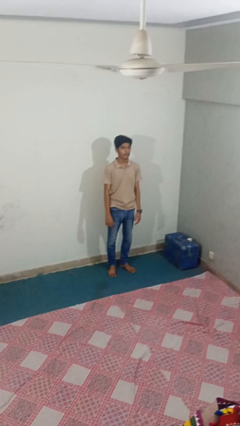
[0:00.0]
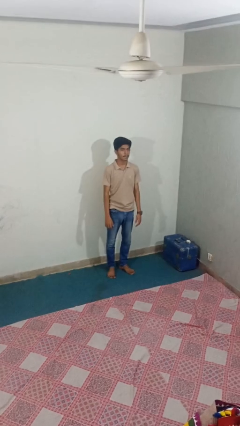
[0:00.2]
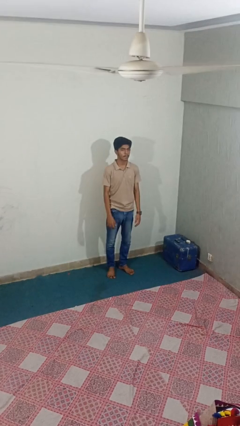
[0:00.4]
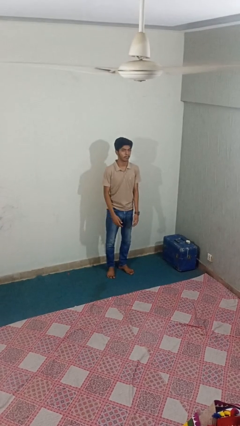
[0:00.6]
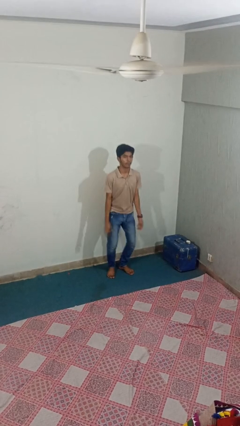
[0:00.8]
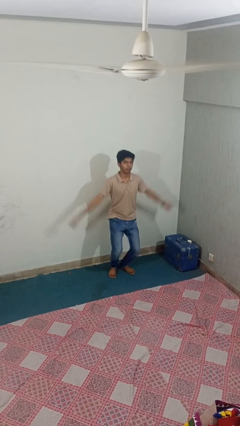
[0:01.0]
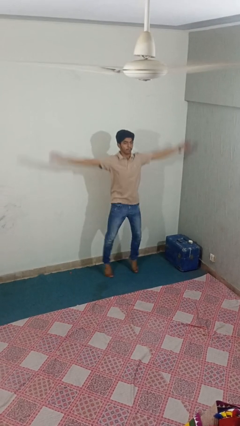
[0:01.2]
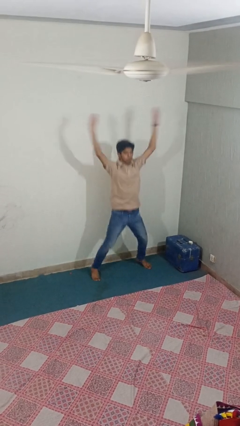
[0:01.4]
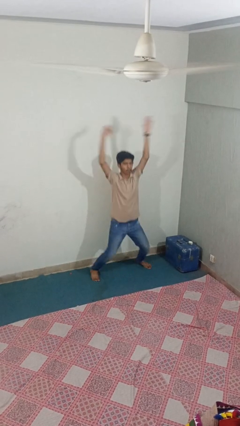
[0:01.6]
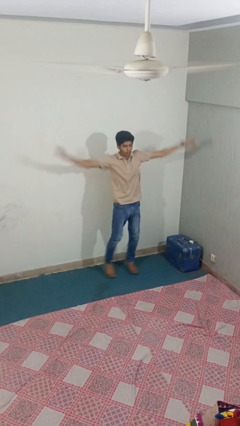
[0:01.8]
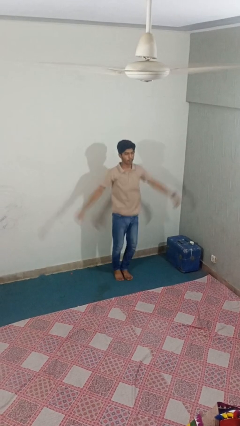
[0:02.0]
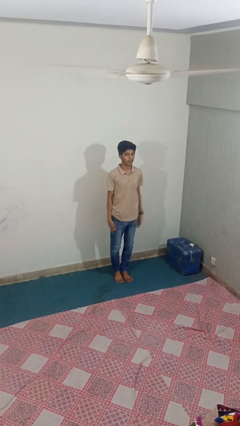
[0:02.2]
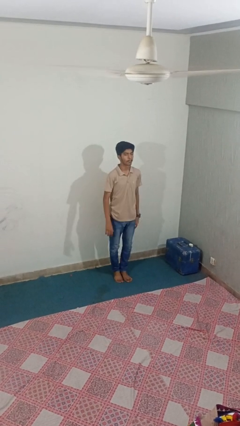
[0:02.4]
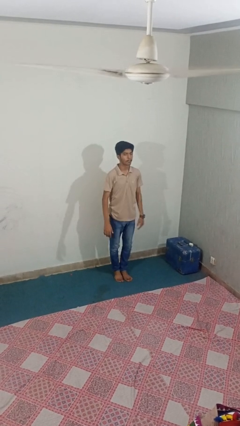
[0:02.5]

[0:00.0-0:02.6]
person exercises with jumping jacks

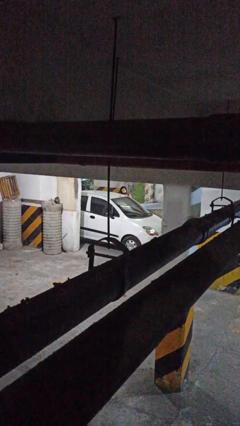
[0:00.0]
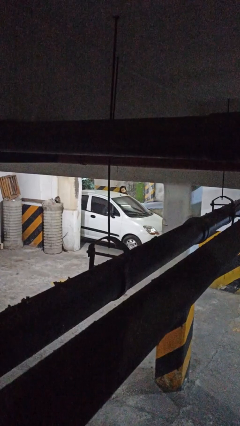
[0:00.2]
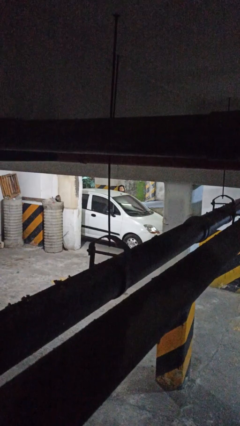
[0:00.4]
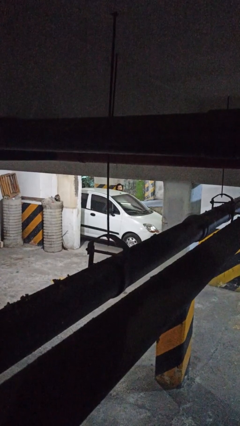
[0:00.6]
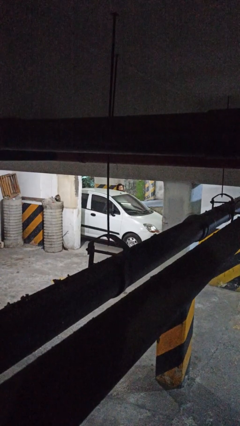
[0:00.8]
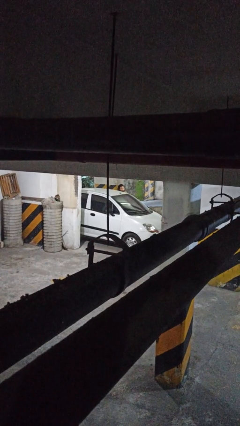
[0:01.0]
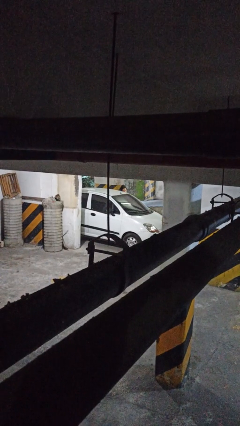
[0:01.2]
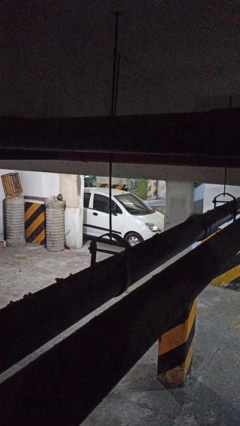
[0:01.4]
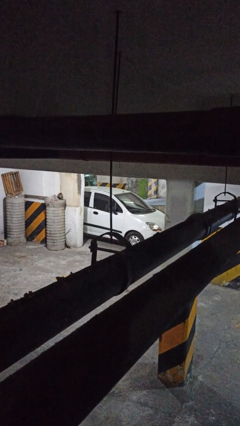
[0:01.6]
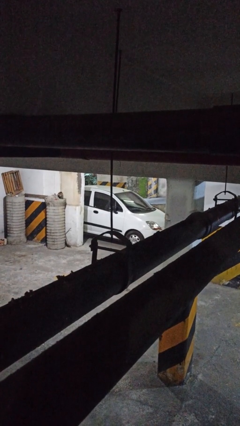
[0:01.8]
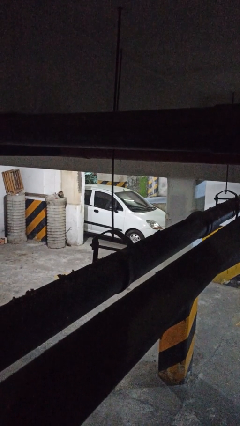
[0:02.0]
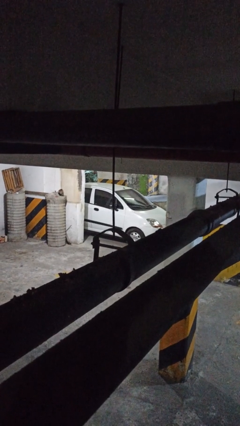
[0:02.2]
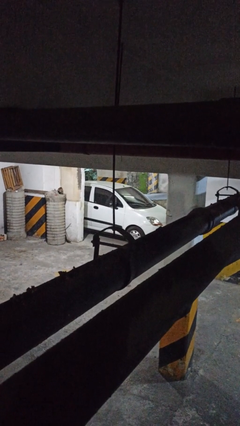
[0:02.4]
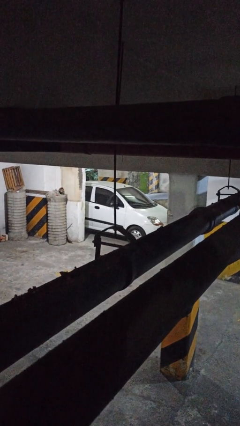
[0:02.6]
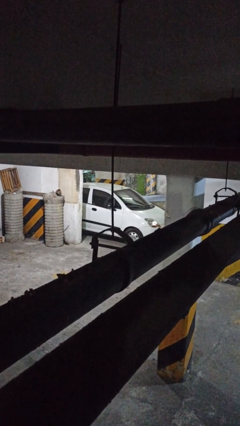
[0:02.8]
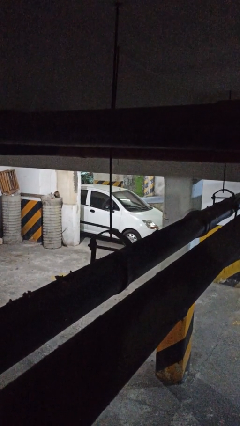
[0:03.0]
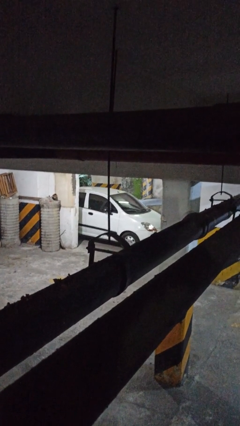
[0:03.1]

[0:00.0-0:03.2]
car picks up person

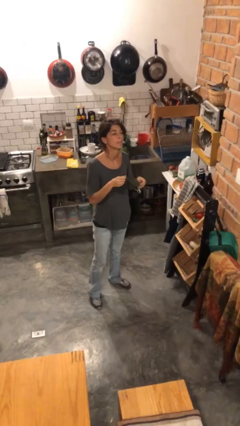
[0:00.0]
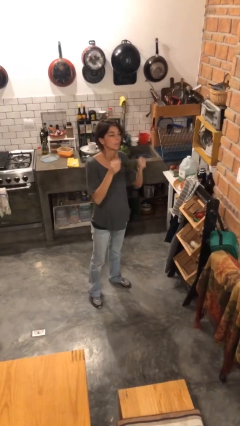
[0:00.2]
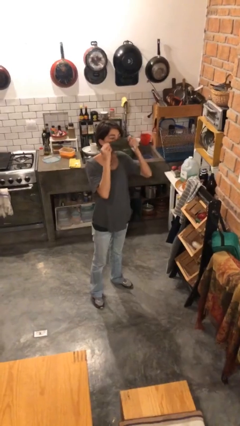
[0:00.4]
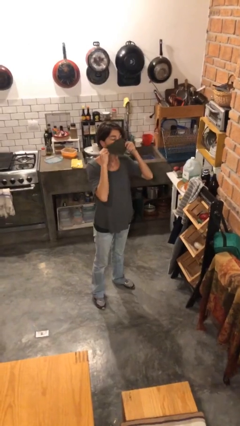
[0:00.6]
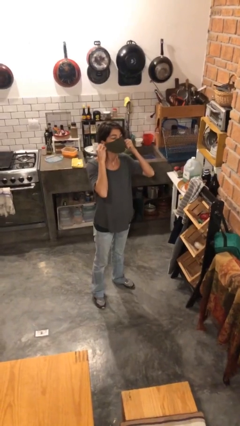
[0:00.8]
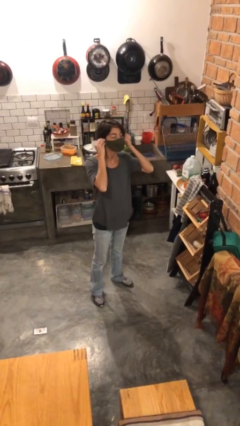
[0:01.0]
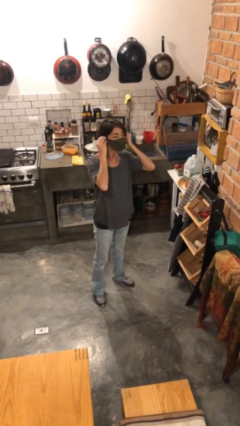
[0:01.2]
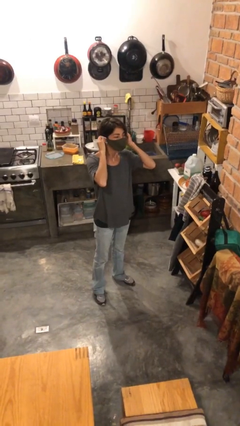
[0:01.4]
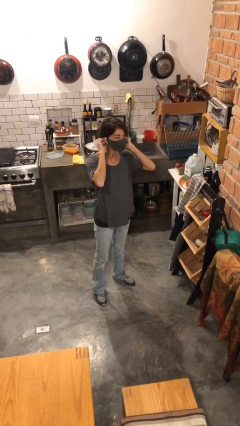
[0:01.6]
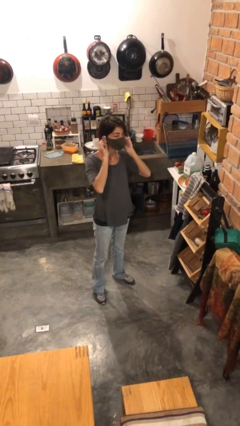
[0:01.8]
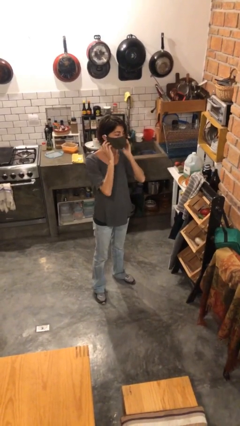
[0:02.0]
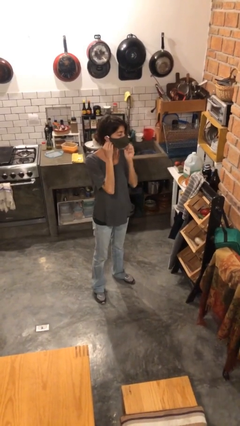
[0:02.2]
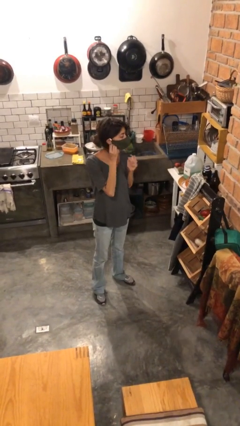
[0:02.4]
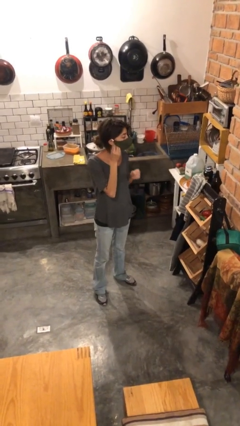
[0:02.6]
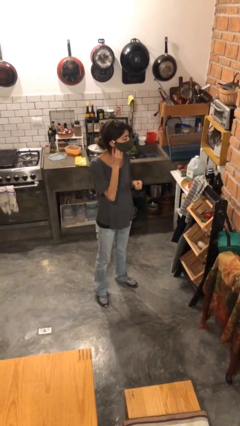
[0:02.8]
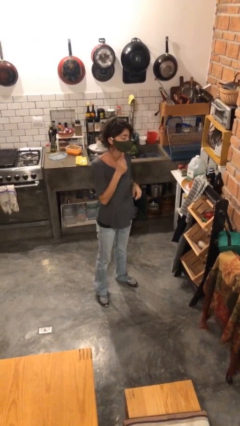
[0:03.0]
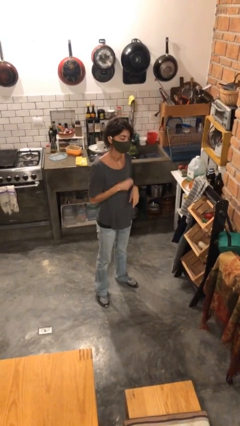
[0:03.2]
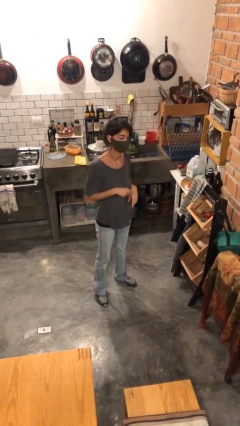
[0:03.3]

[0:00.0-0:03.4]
person puts on facemask

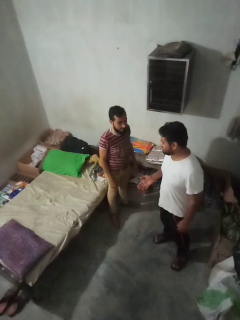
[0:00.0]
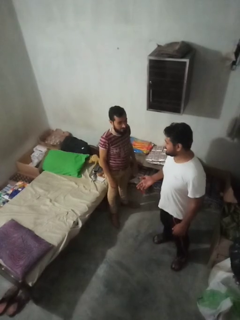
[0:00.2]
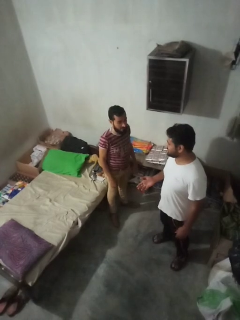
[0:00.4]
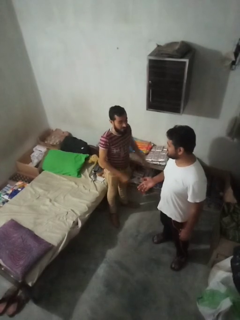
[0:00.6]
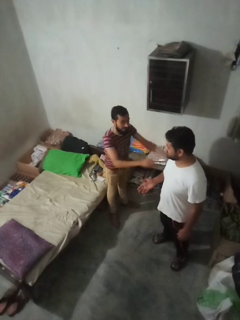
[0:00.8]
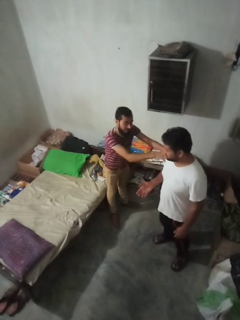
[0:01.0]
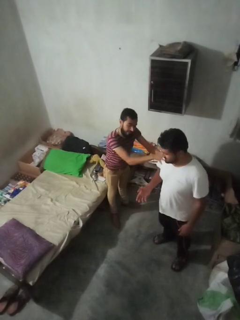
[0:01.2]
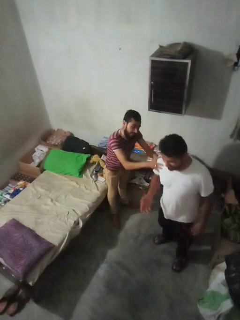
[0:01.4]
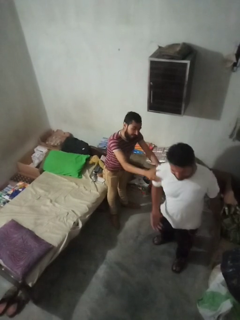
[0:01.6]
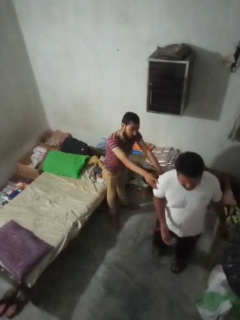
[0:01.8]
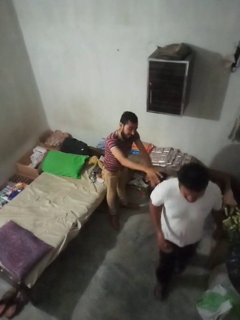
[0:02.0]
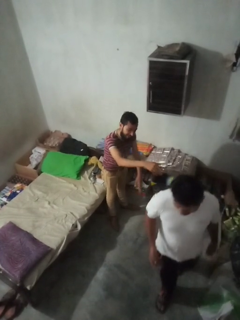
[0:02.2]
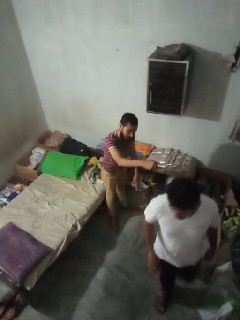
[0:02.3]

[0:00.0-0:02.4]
person shoves person

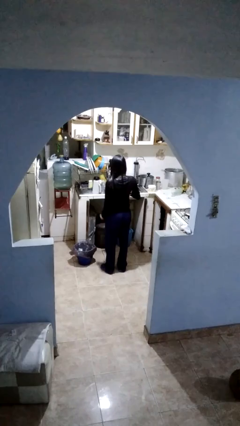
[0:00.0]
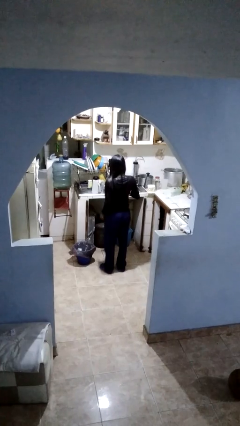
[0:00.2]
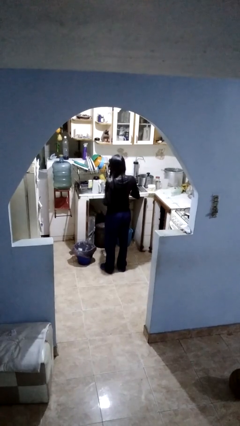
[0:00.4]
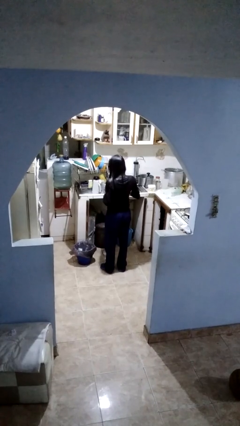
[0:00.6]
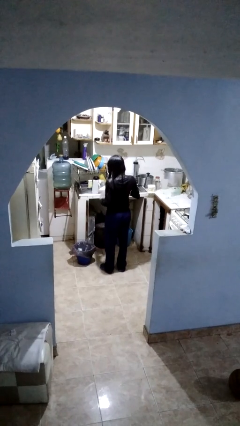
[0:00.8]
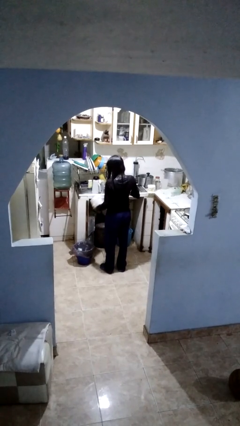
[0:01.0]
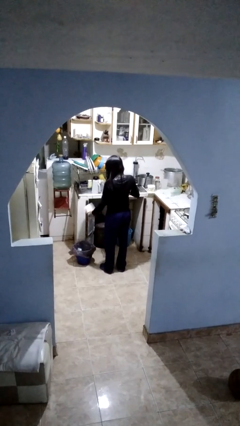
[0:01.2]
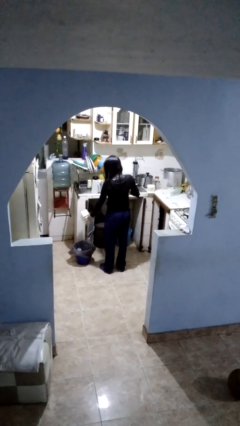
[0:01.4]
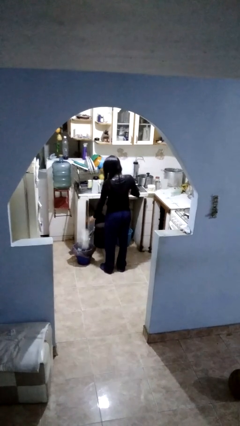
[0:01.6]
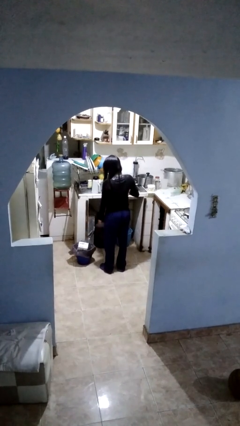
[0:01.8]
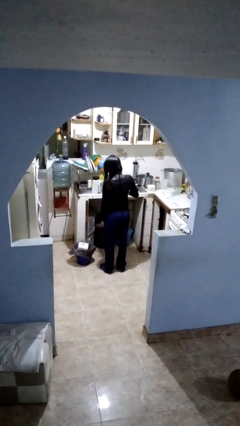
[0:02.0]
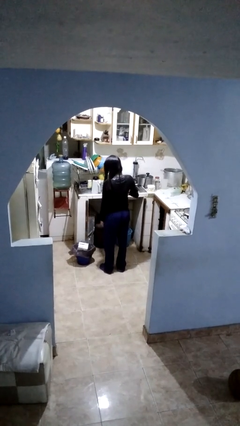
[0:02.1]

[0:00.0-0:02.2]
person discards trash

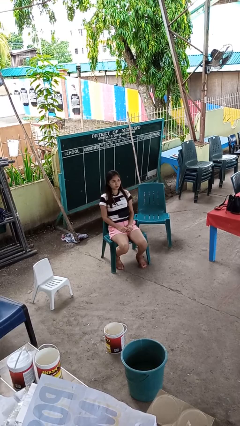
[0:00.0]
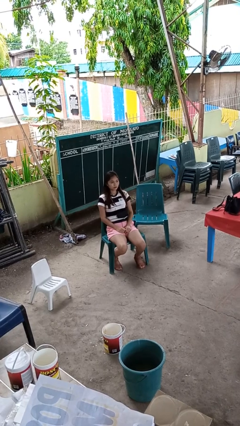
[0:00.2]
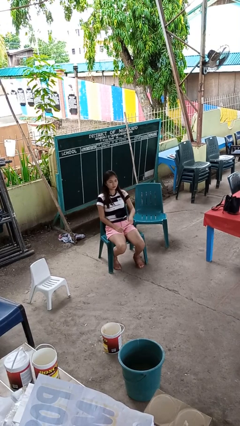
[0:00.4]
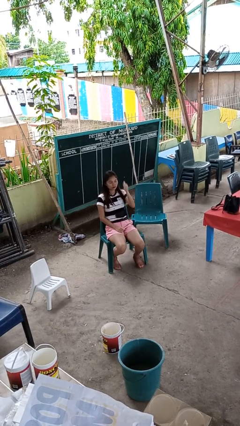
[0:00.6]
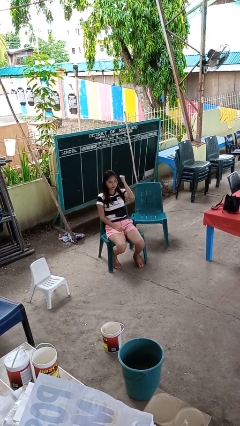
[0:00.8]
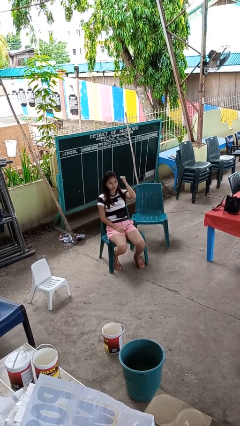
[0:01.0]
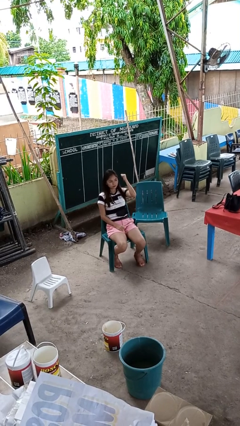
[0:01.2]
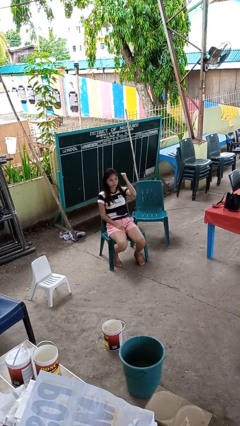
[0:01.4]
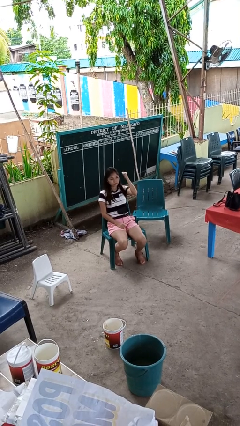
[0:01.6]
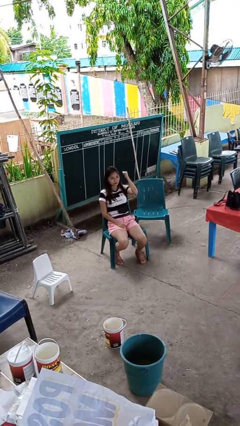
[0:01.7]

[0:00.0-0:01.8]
person gestures behind me

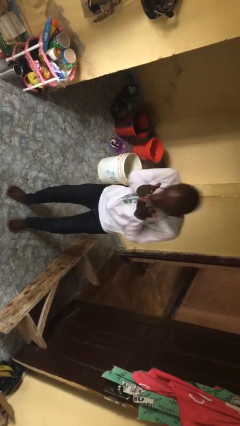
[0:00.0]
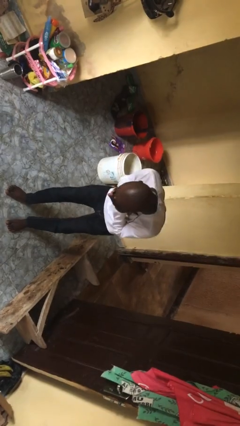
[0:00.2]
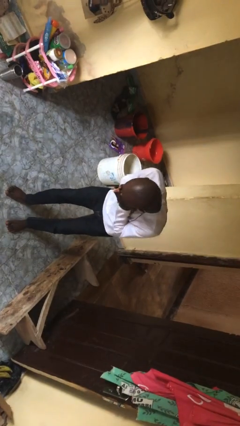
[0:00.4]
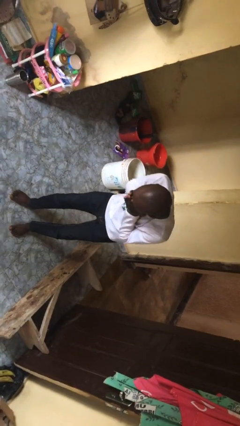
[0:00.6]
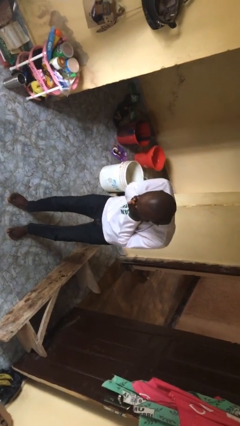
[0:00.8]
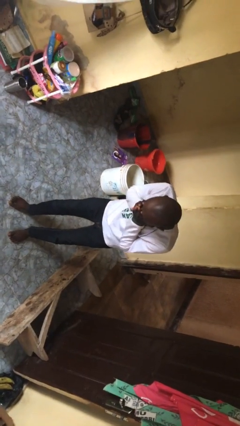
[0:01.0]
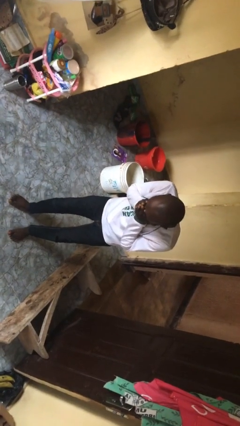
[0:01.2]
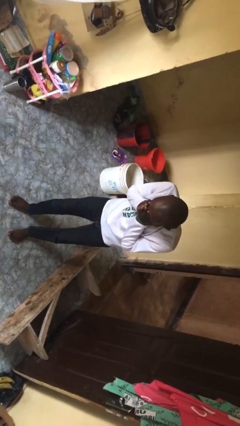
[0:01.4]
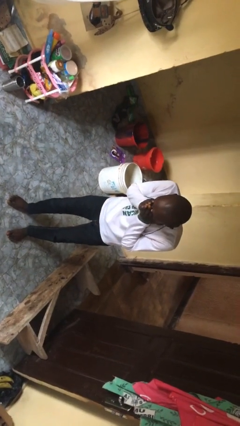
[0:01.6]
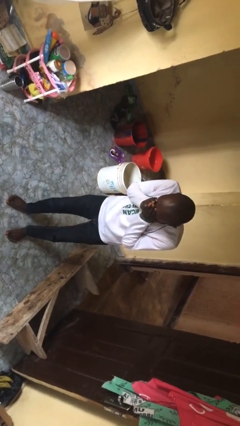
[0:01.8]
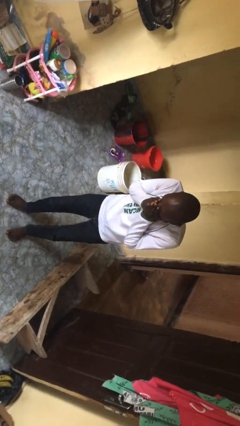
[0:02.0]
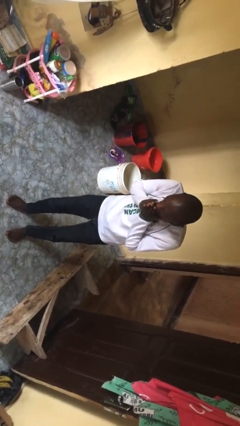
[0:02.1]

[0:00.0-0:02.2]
person sneezes into hand
